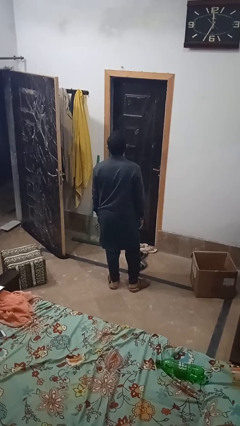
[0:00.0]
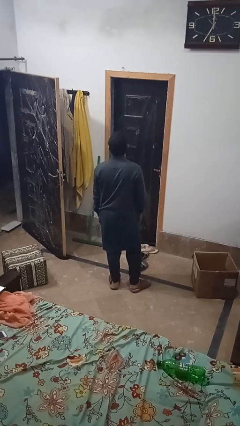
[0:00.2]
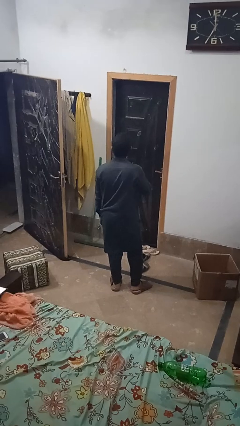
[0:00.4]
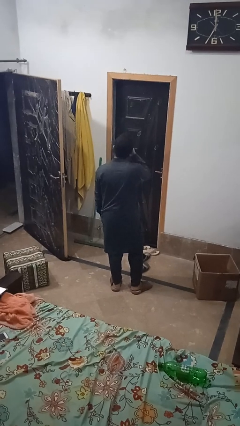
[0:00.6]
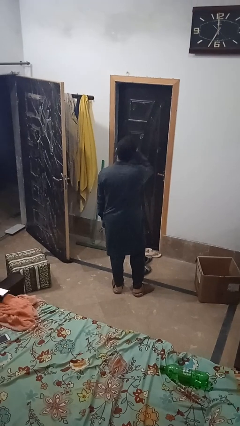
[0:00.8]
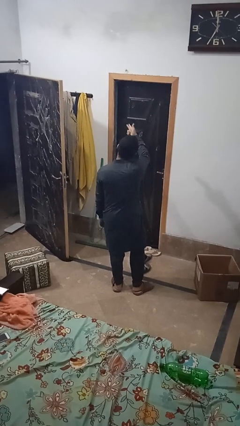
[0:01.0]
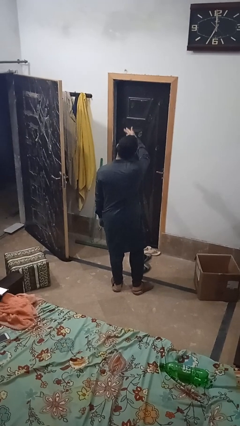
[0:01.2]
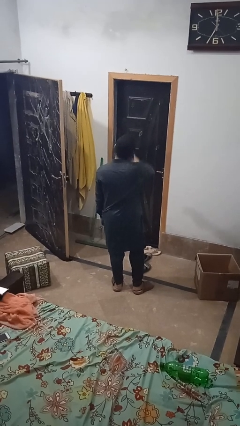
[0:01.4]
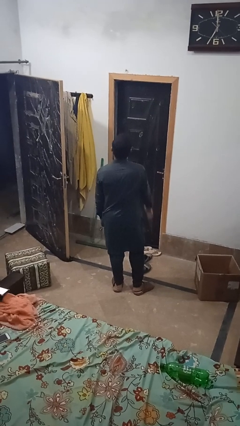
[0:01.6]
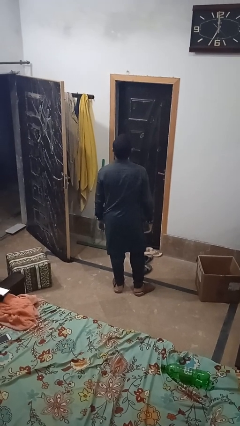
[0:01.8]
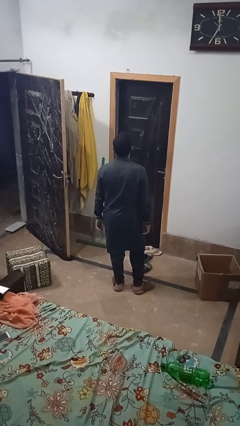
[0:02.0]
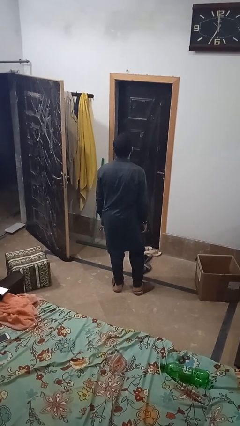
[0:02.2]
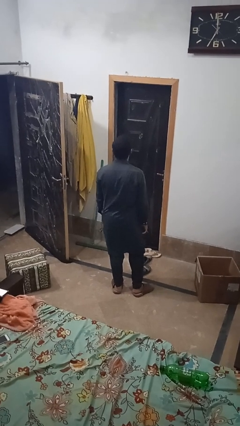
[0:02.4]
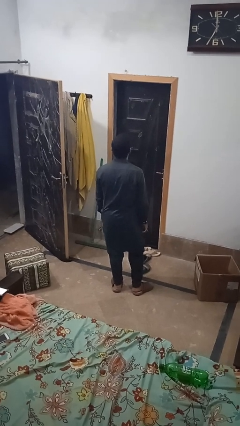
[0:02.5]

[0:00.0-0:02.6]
person gestures blow kiss

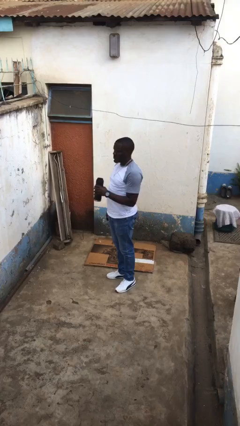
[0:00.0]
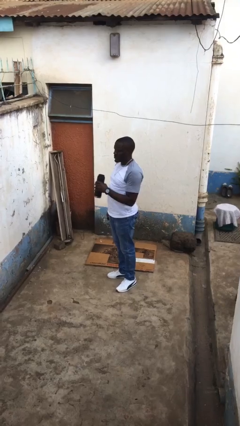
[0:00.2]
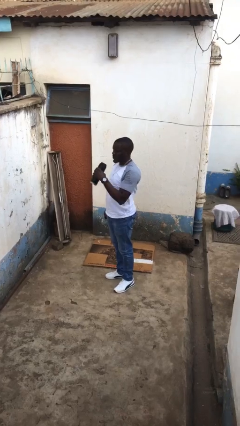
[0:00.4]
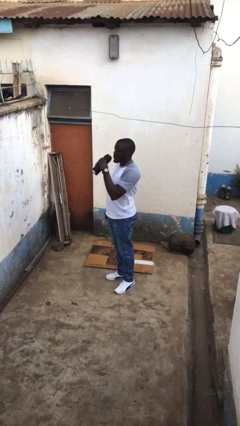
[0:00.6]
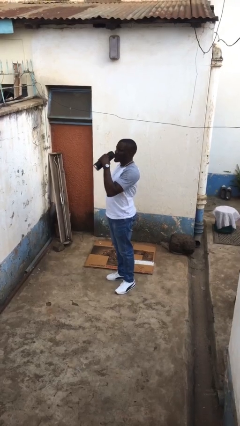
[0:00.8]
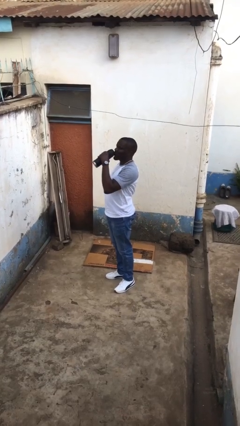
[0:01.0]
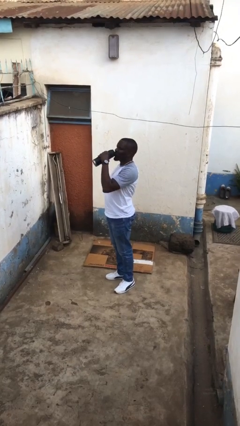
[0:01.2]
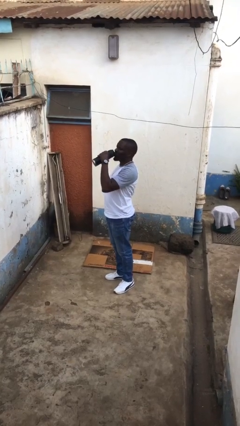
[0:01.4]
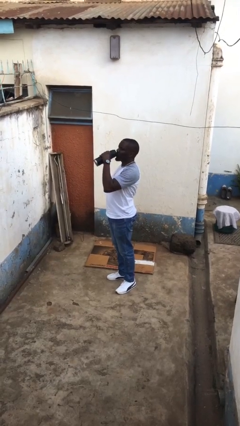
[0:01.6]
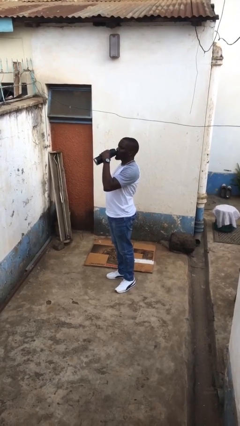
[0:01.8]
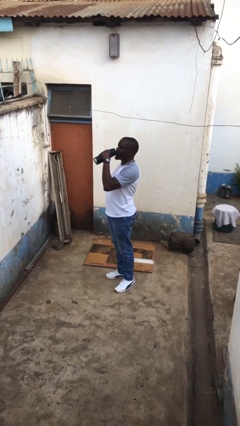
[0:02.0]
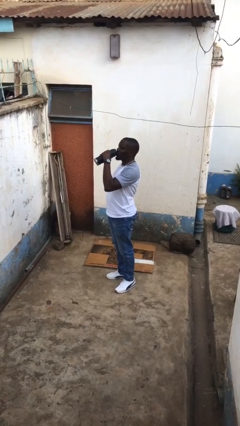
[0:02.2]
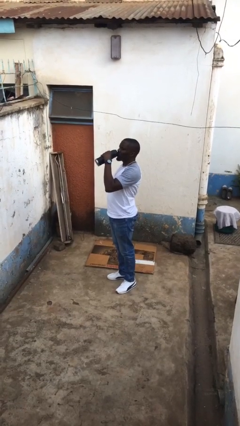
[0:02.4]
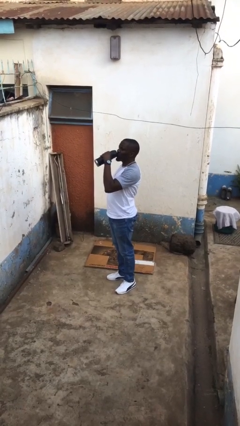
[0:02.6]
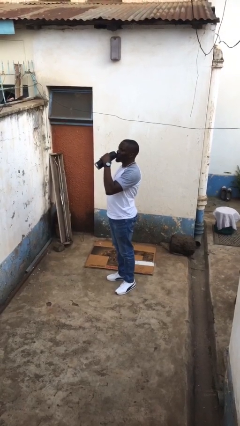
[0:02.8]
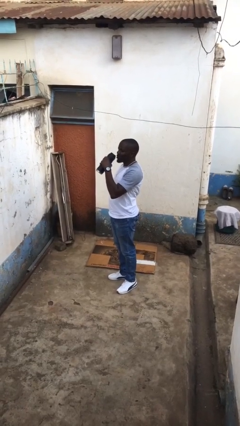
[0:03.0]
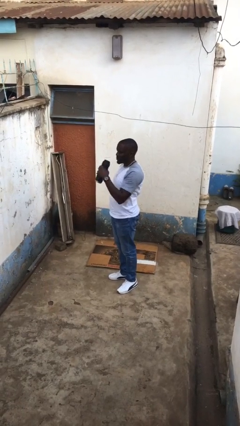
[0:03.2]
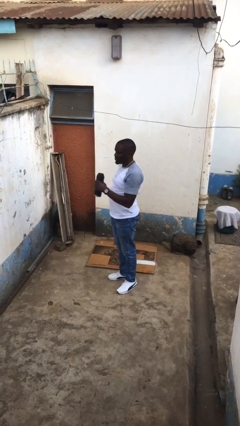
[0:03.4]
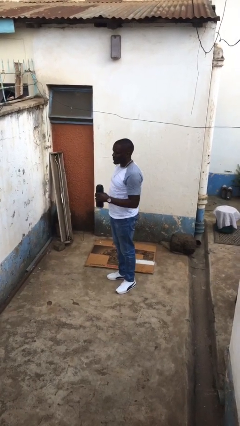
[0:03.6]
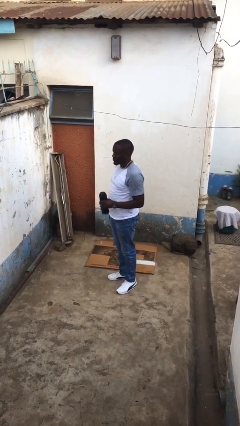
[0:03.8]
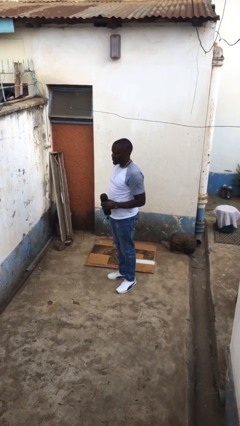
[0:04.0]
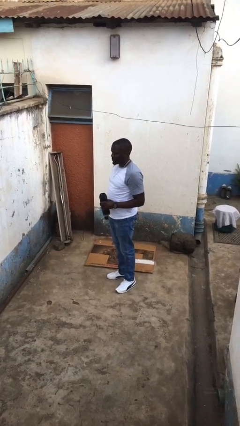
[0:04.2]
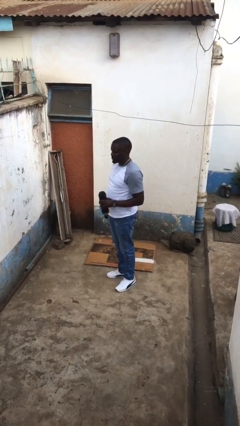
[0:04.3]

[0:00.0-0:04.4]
person drinks from bottle

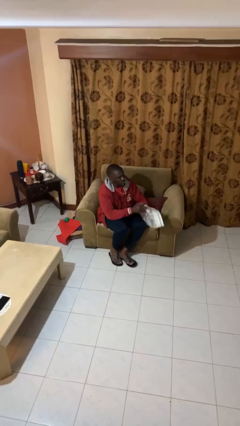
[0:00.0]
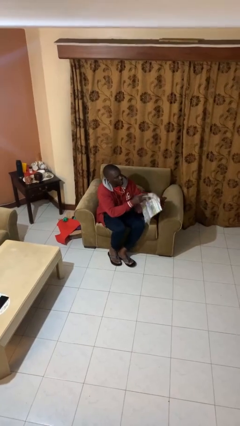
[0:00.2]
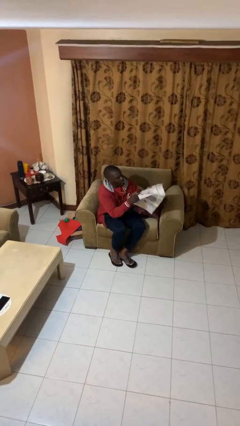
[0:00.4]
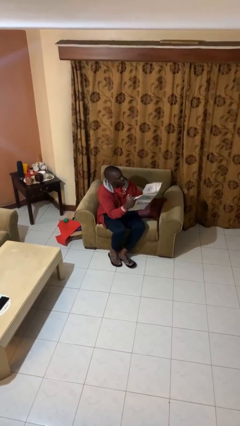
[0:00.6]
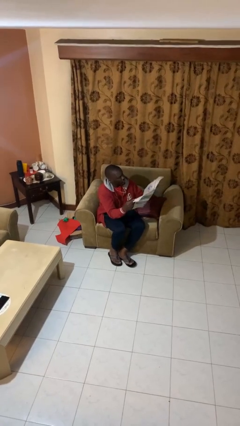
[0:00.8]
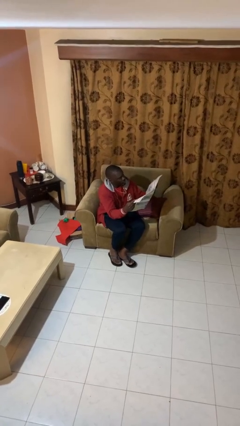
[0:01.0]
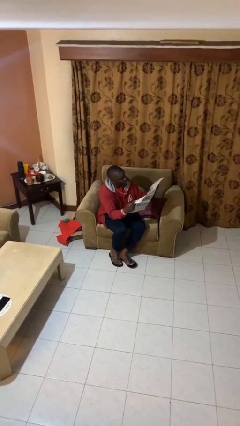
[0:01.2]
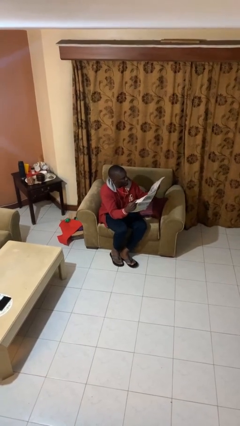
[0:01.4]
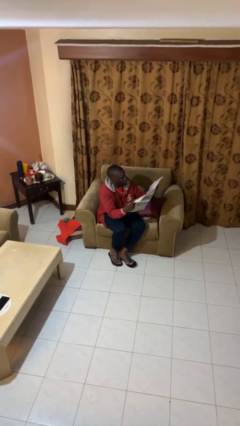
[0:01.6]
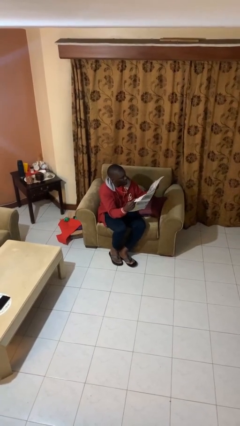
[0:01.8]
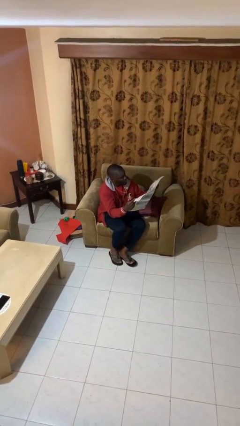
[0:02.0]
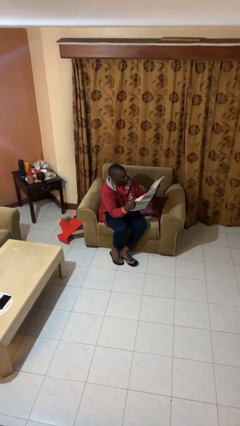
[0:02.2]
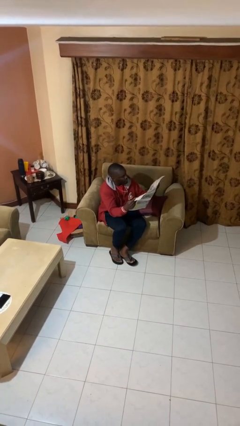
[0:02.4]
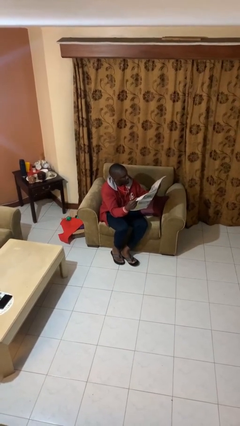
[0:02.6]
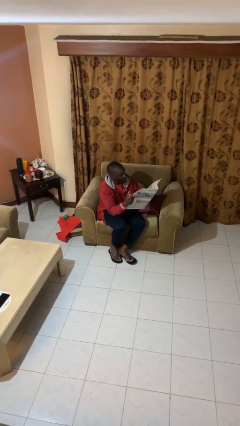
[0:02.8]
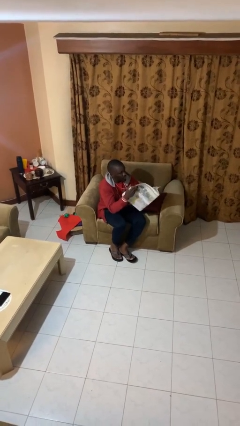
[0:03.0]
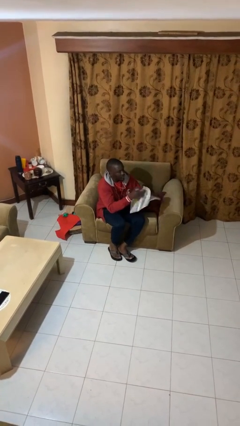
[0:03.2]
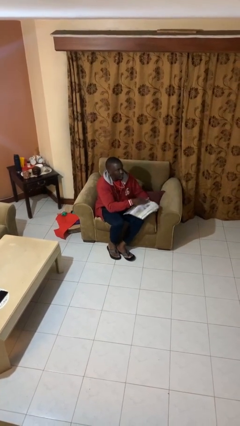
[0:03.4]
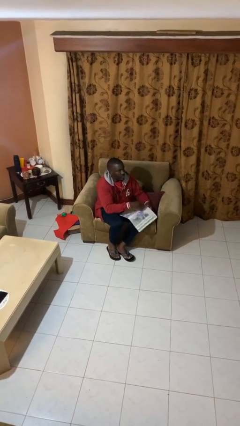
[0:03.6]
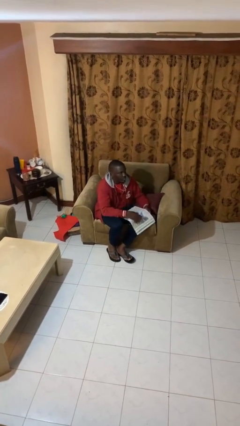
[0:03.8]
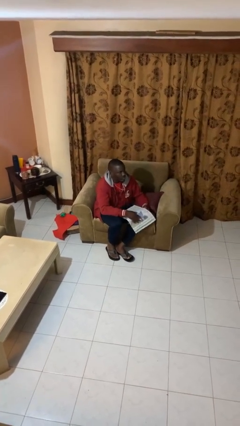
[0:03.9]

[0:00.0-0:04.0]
person reads newspaper

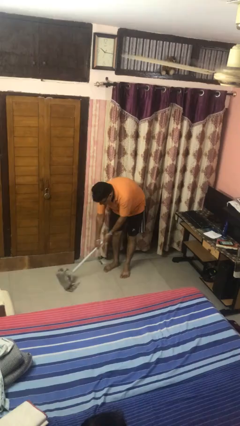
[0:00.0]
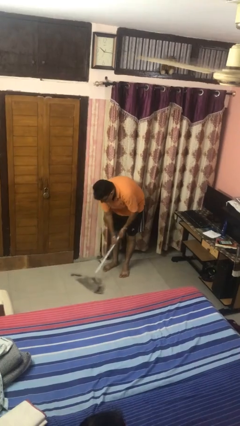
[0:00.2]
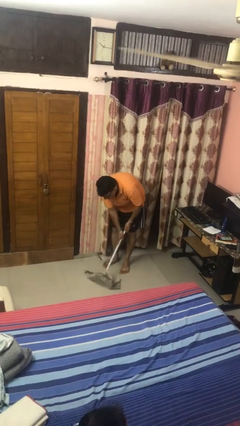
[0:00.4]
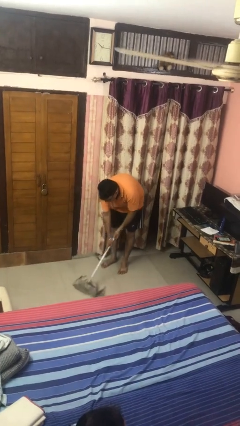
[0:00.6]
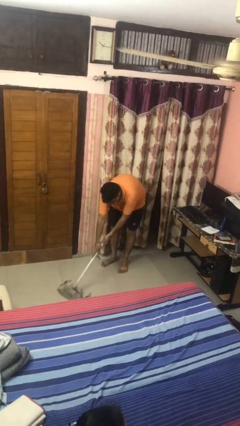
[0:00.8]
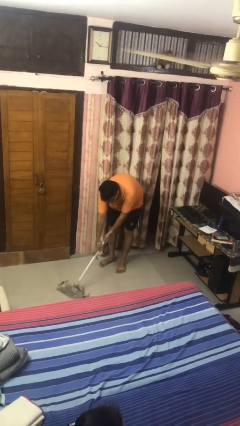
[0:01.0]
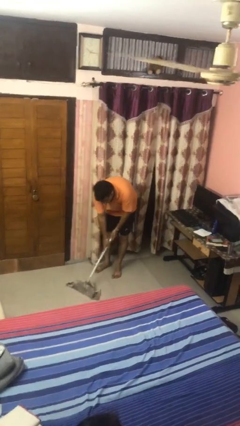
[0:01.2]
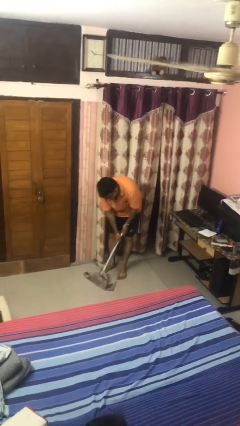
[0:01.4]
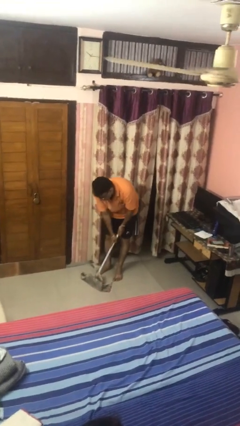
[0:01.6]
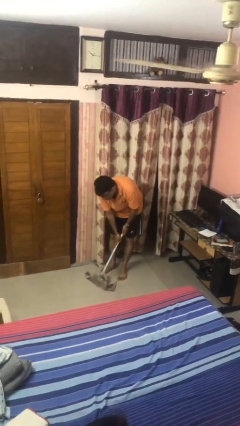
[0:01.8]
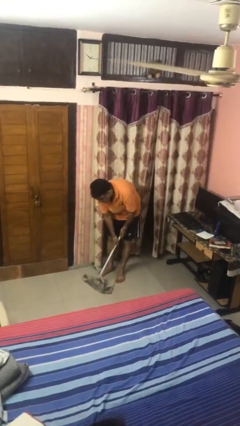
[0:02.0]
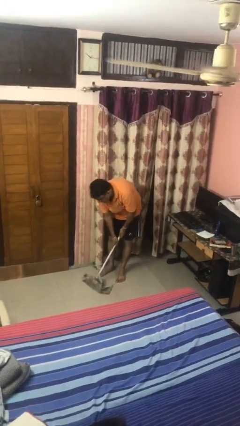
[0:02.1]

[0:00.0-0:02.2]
person mops

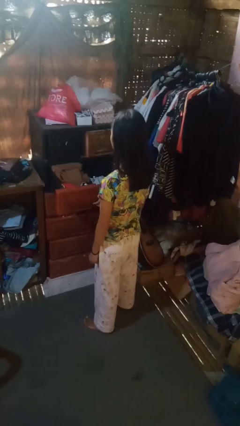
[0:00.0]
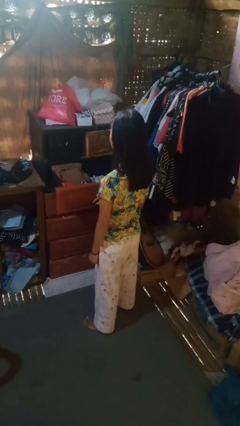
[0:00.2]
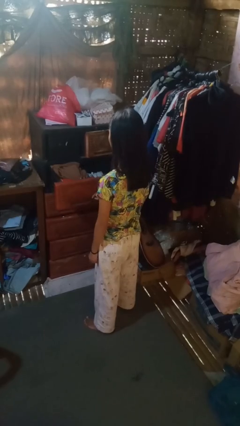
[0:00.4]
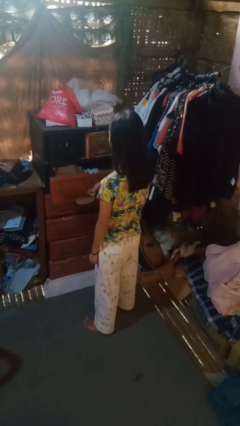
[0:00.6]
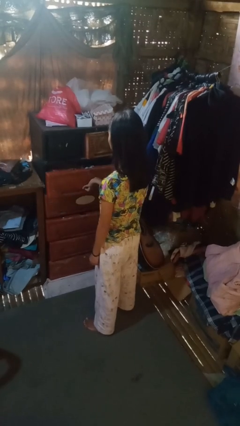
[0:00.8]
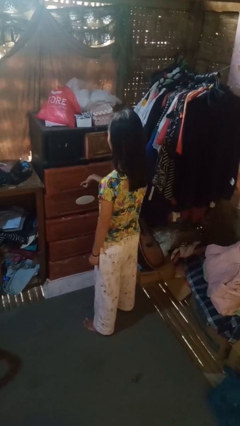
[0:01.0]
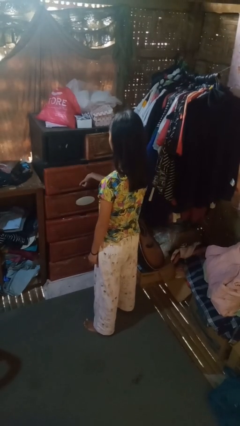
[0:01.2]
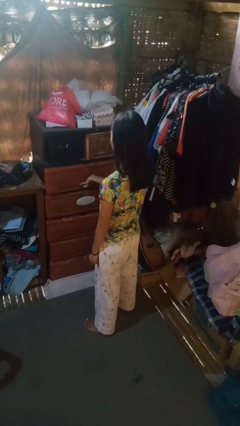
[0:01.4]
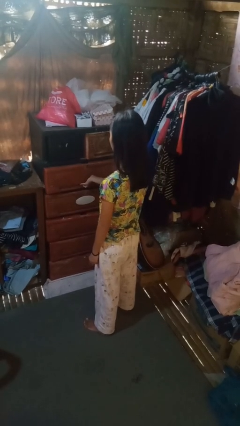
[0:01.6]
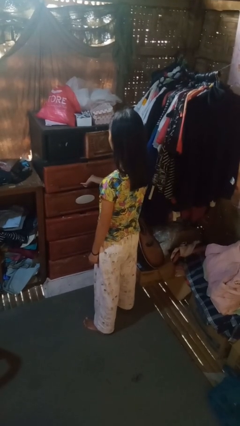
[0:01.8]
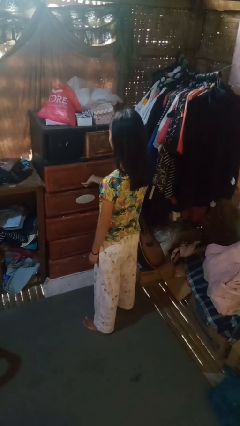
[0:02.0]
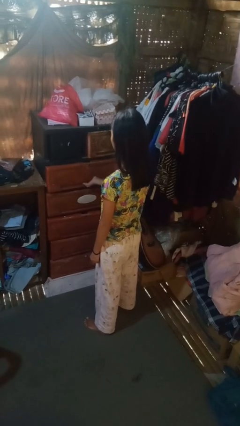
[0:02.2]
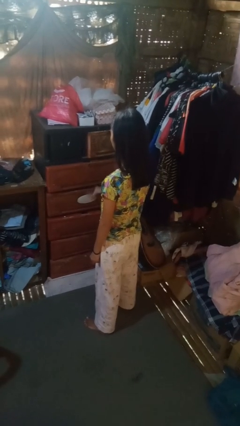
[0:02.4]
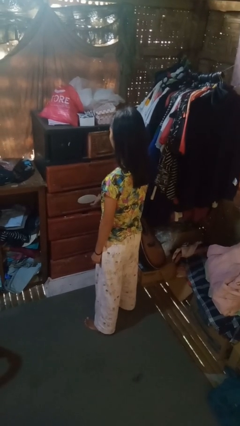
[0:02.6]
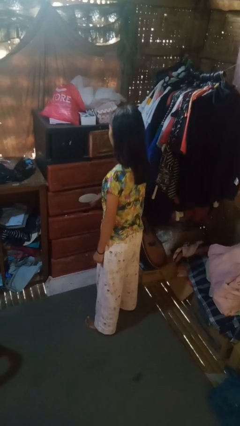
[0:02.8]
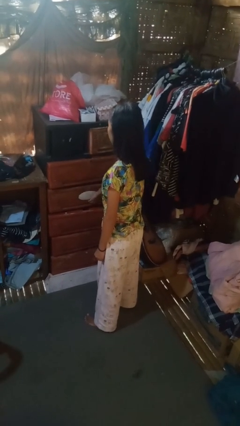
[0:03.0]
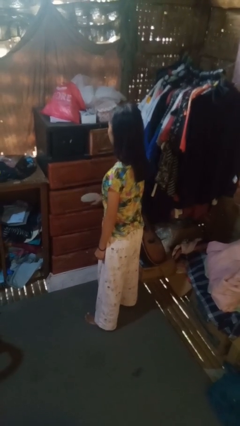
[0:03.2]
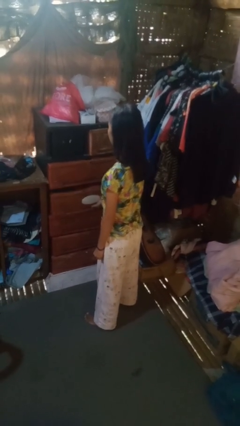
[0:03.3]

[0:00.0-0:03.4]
person closes dresser drawer

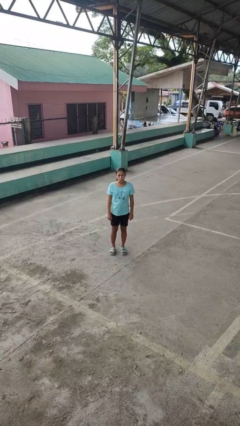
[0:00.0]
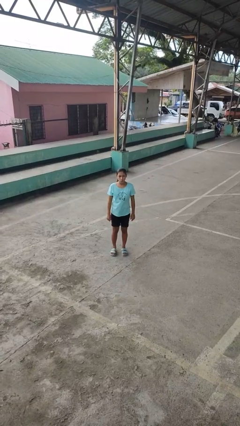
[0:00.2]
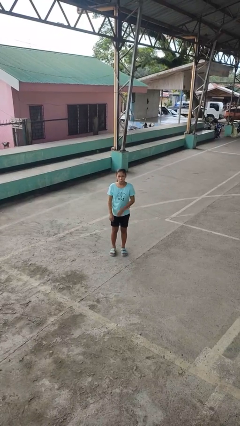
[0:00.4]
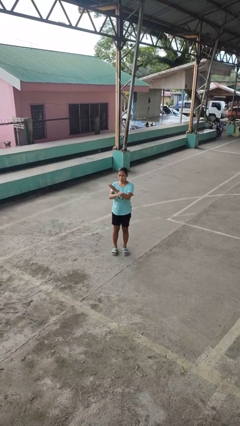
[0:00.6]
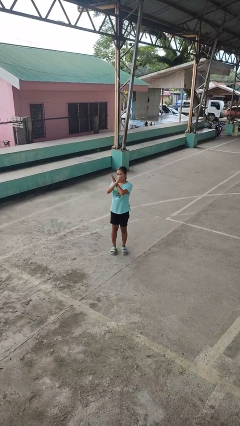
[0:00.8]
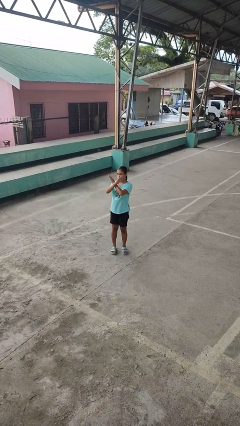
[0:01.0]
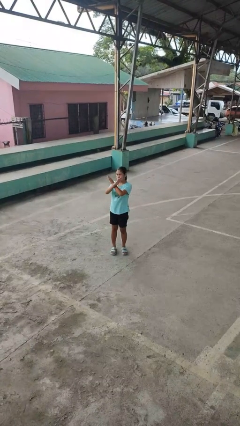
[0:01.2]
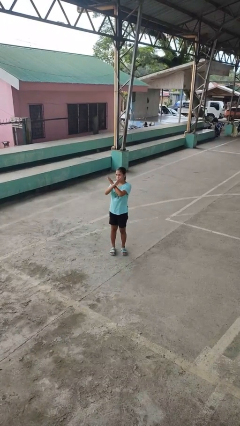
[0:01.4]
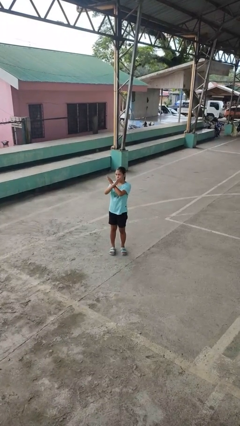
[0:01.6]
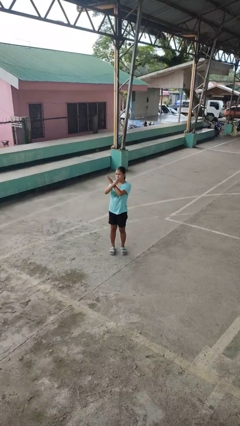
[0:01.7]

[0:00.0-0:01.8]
person gestures arms x
